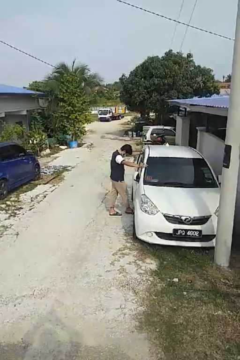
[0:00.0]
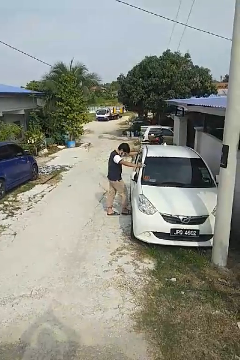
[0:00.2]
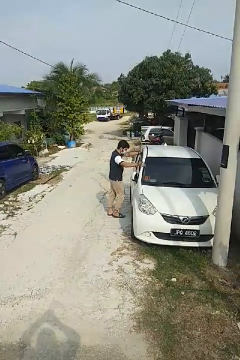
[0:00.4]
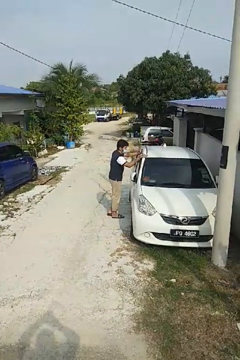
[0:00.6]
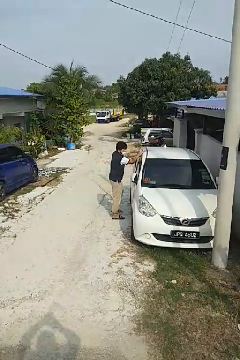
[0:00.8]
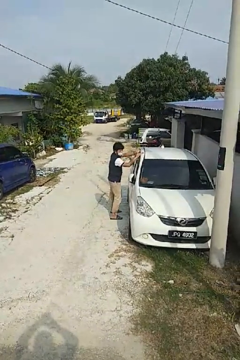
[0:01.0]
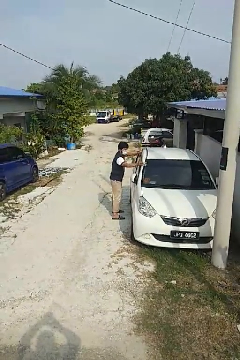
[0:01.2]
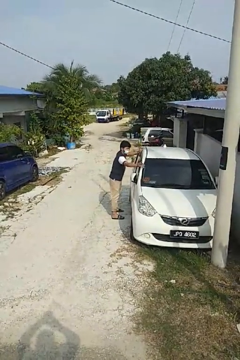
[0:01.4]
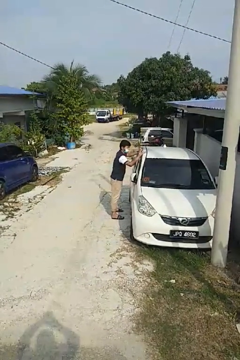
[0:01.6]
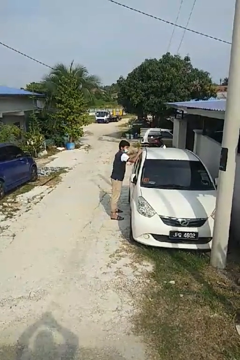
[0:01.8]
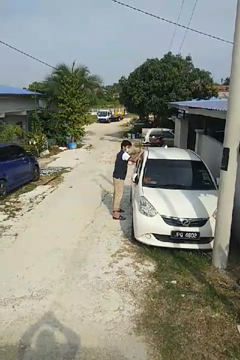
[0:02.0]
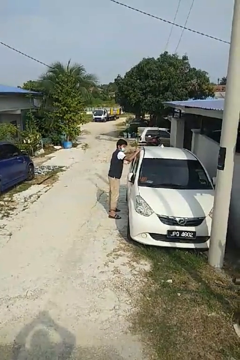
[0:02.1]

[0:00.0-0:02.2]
person polishes car with rag

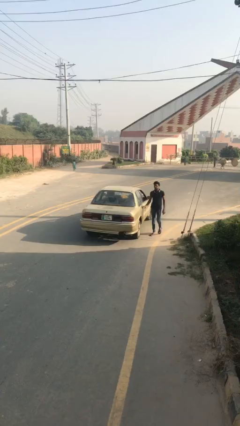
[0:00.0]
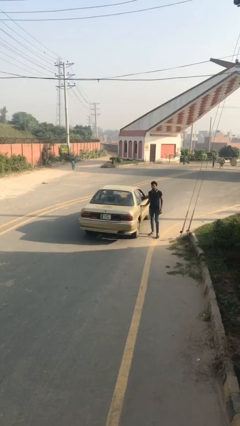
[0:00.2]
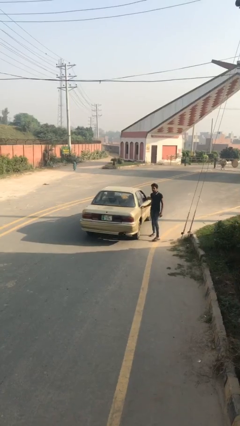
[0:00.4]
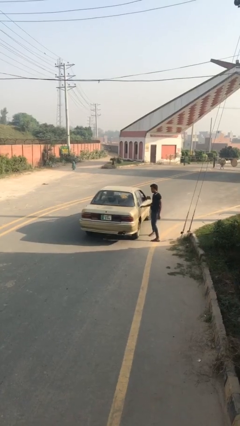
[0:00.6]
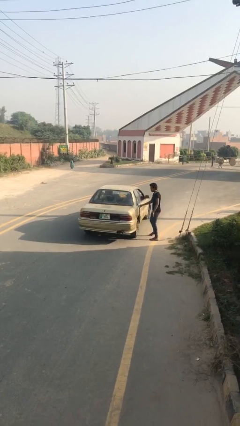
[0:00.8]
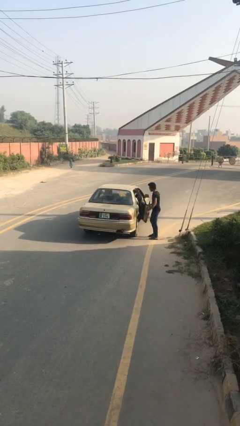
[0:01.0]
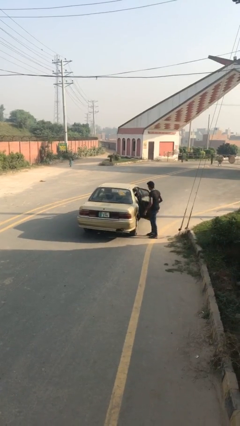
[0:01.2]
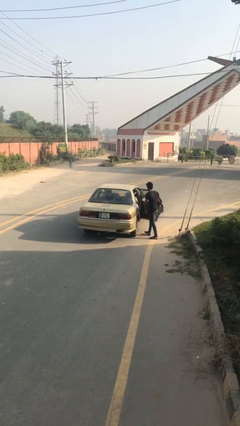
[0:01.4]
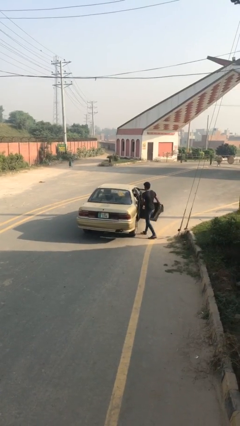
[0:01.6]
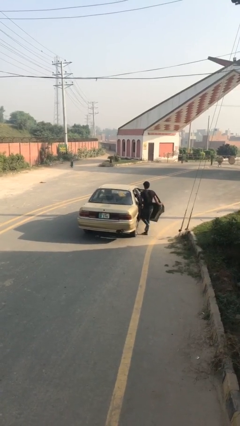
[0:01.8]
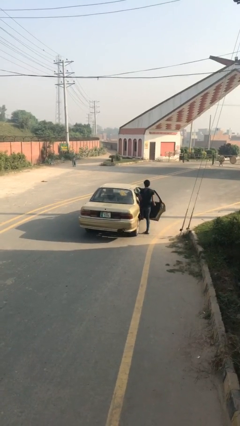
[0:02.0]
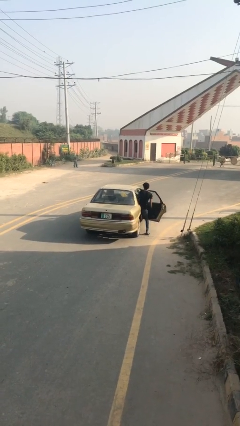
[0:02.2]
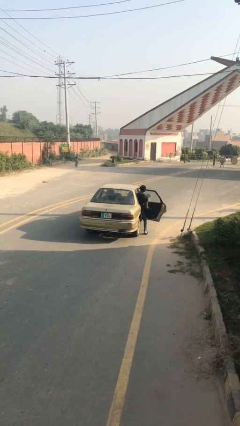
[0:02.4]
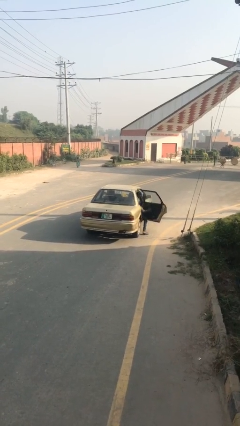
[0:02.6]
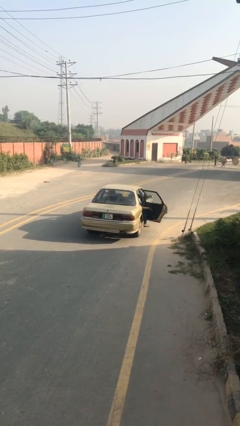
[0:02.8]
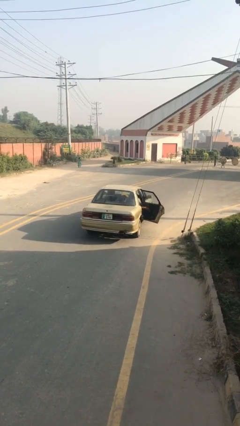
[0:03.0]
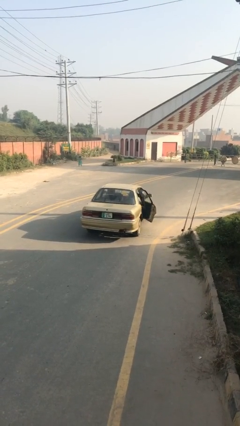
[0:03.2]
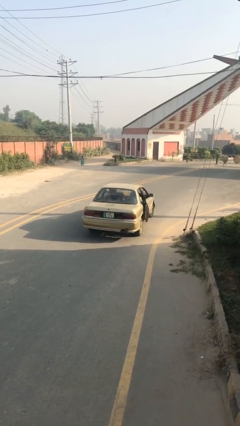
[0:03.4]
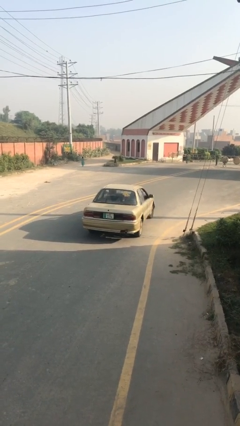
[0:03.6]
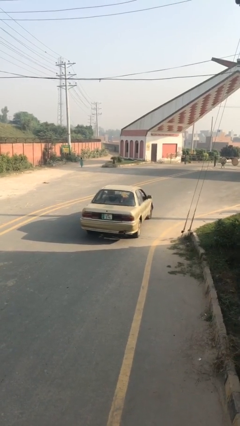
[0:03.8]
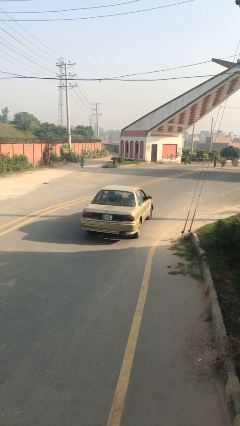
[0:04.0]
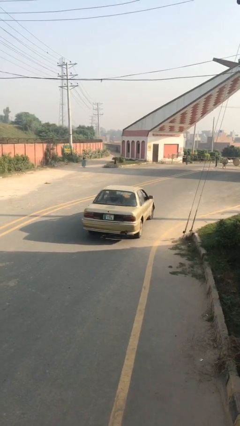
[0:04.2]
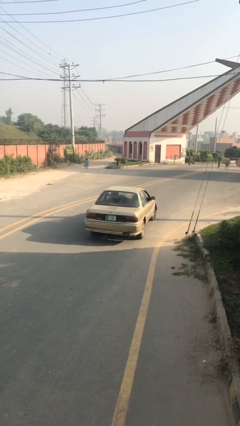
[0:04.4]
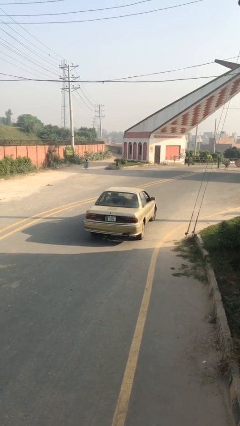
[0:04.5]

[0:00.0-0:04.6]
car picks up person

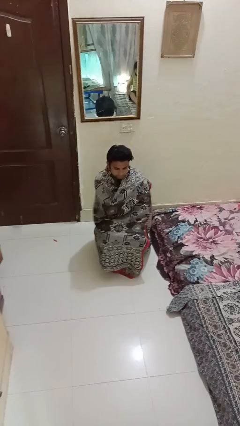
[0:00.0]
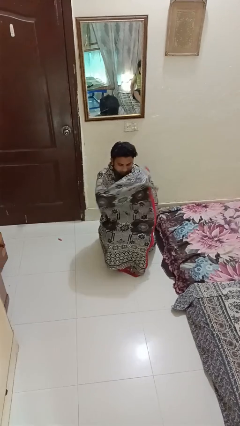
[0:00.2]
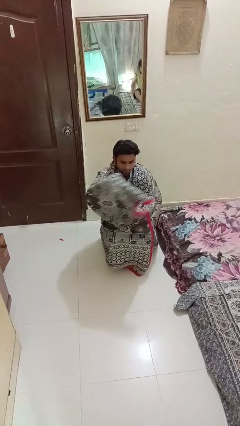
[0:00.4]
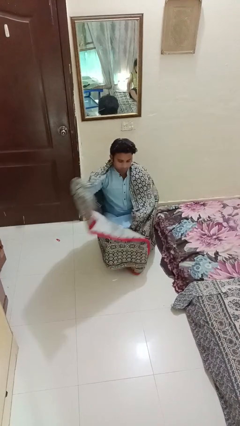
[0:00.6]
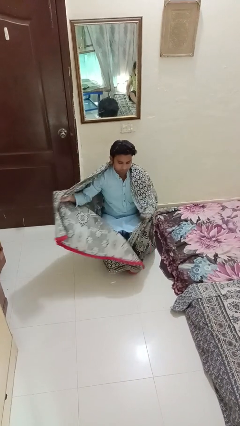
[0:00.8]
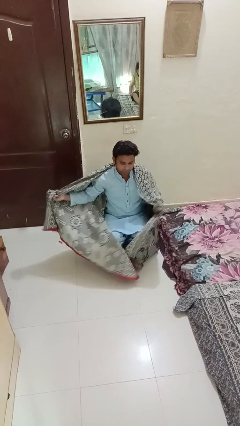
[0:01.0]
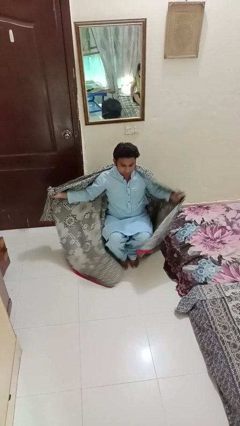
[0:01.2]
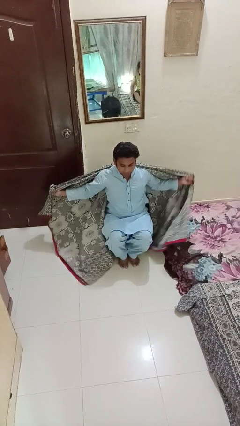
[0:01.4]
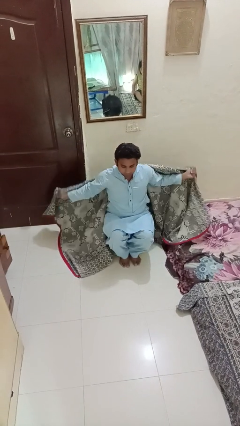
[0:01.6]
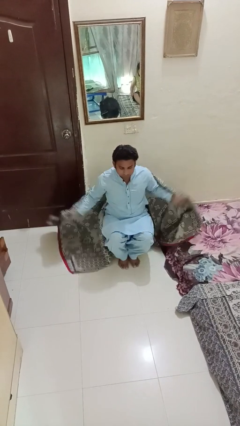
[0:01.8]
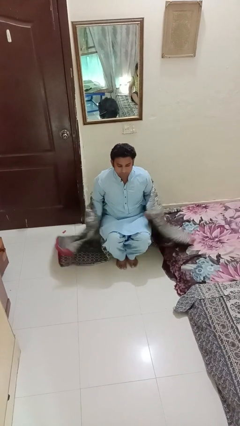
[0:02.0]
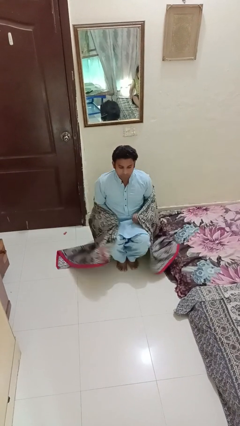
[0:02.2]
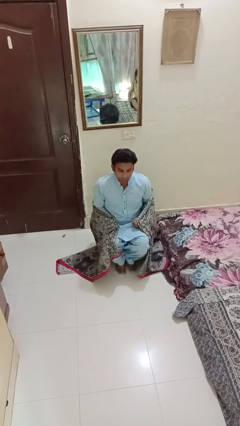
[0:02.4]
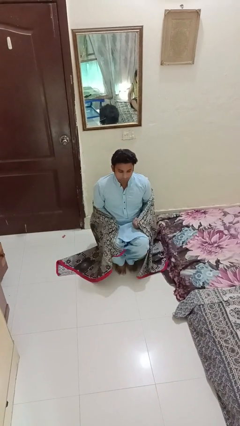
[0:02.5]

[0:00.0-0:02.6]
person uncovers with blanket

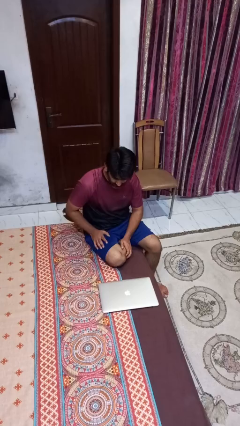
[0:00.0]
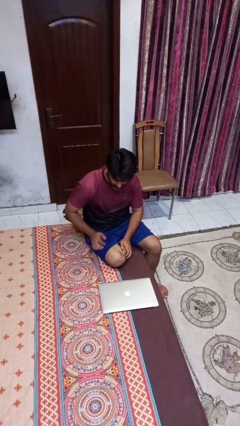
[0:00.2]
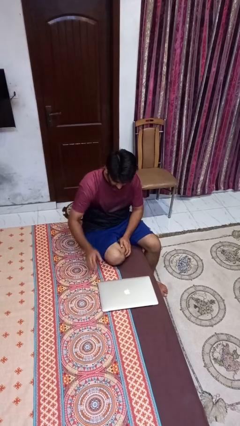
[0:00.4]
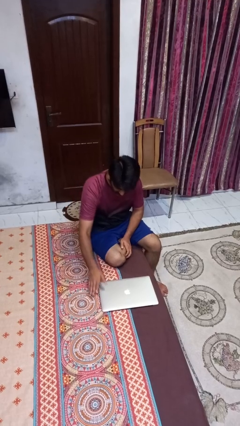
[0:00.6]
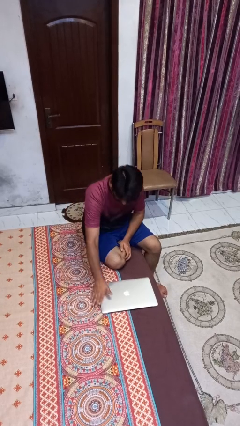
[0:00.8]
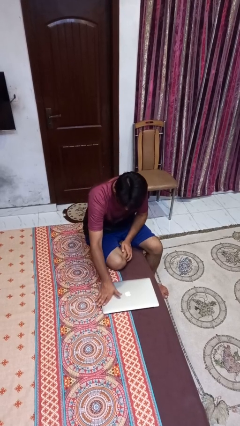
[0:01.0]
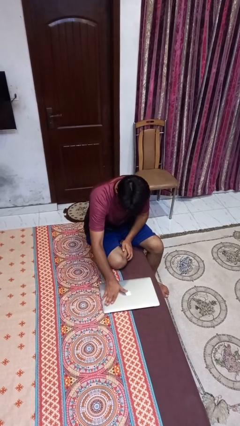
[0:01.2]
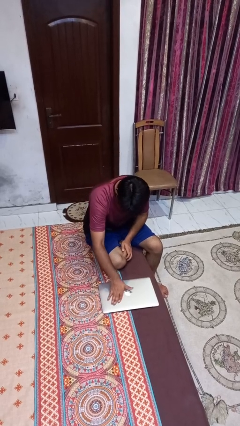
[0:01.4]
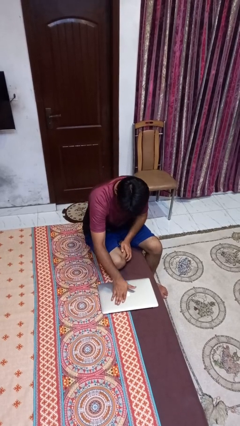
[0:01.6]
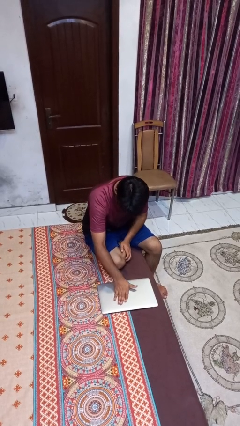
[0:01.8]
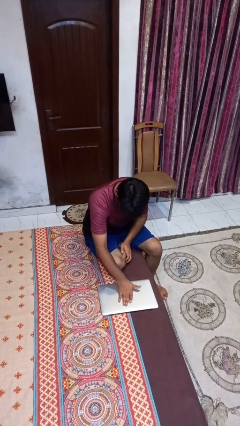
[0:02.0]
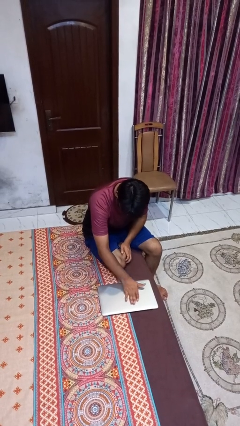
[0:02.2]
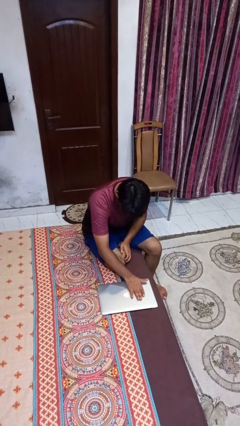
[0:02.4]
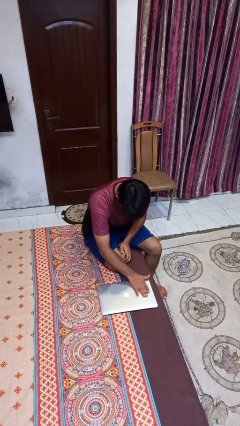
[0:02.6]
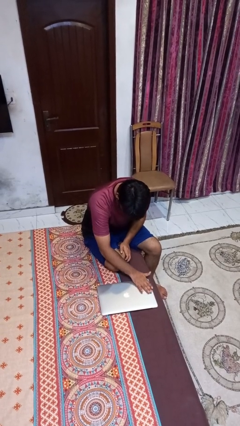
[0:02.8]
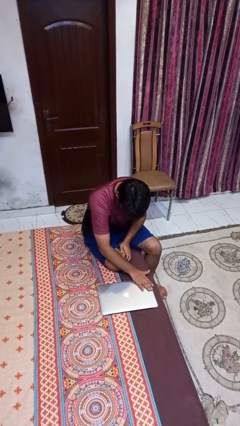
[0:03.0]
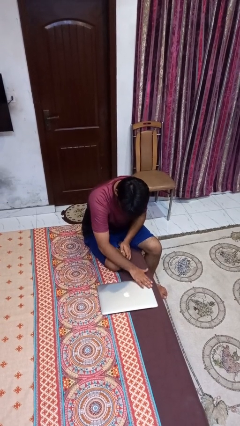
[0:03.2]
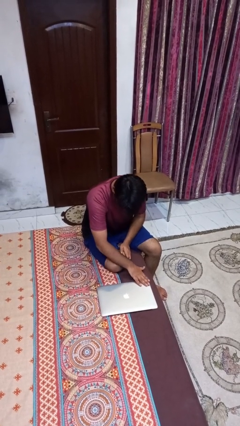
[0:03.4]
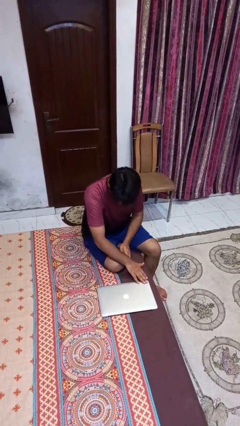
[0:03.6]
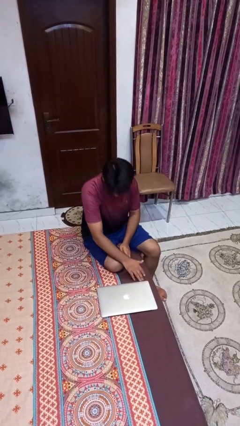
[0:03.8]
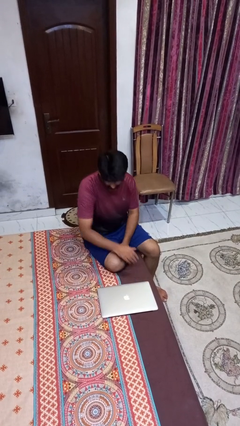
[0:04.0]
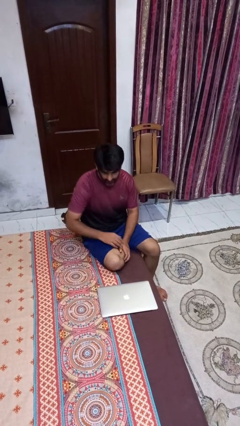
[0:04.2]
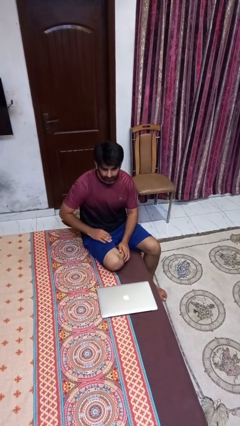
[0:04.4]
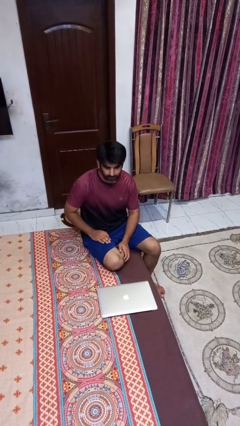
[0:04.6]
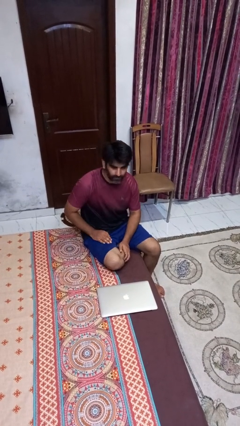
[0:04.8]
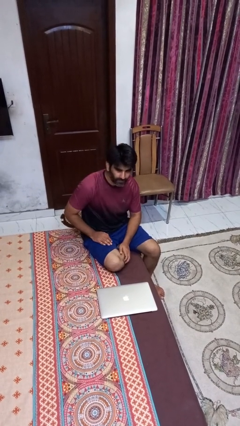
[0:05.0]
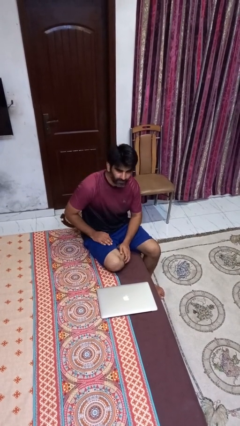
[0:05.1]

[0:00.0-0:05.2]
person waves hand over object

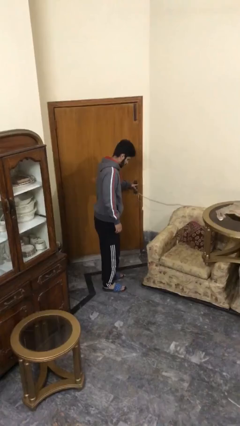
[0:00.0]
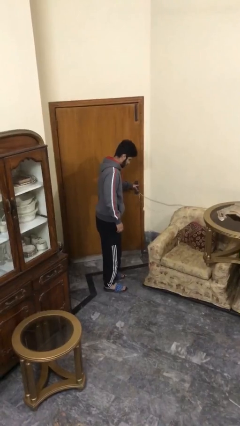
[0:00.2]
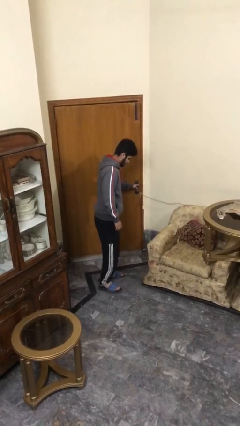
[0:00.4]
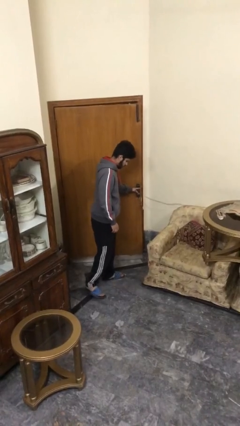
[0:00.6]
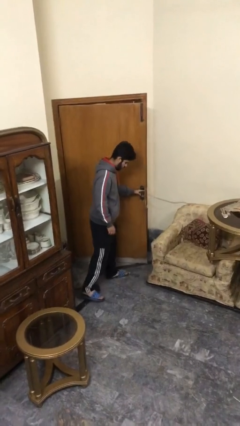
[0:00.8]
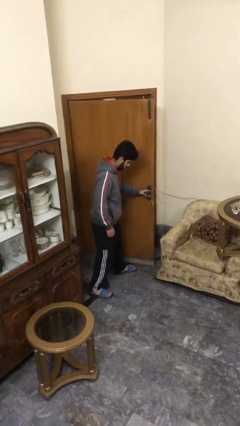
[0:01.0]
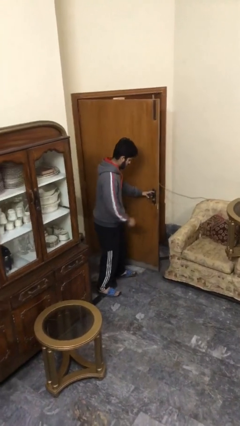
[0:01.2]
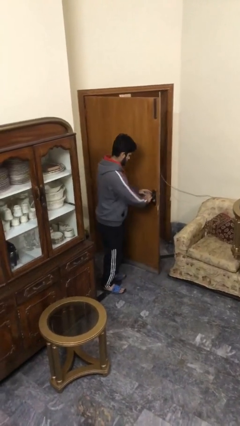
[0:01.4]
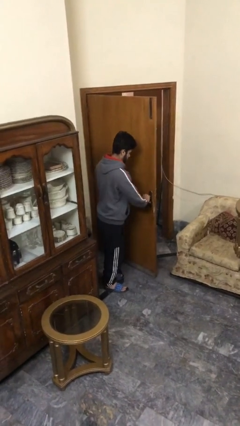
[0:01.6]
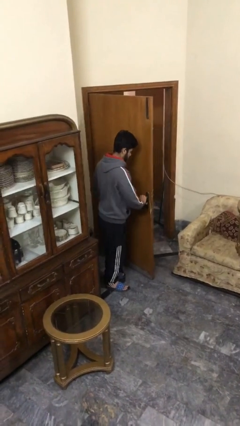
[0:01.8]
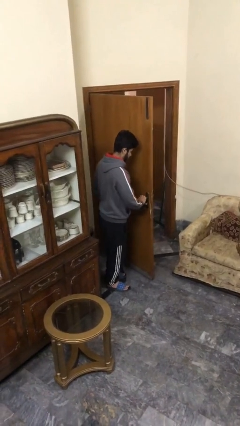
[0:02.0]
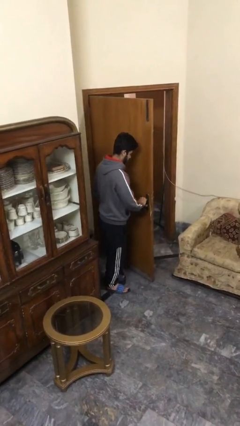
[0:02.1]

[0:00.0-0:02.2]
person opens facility door

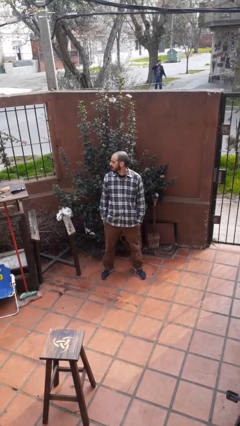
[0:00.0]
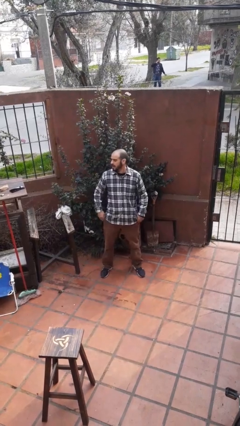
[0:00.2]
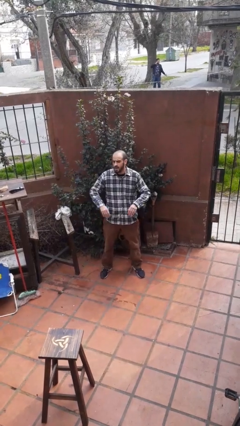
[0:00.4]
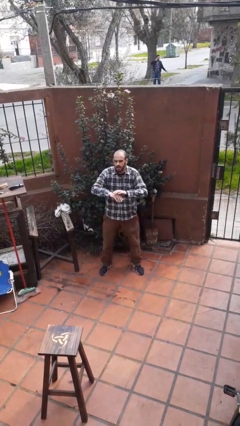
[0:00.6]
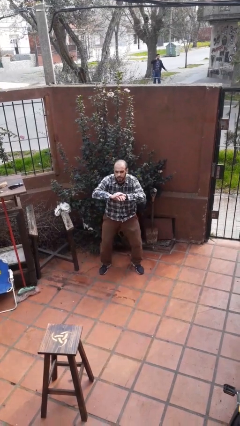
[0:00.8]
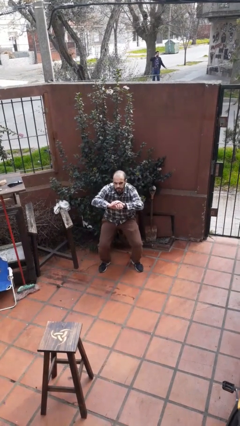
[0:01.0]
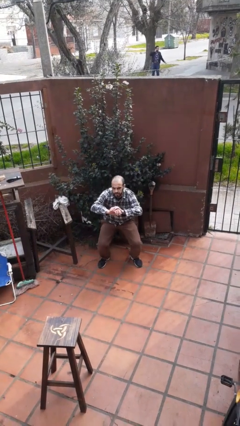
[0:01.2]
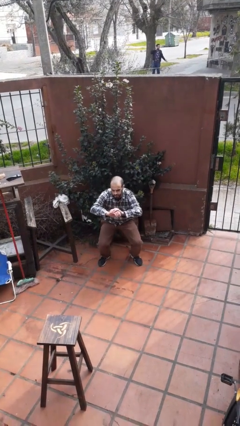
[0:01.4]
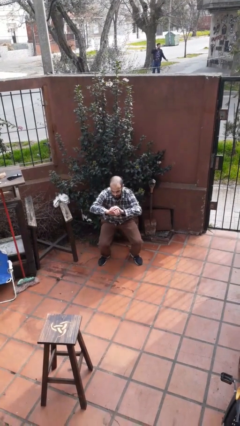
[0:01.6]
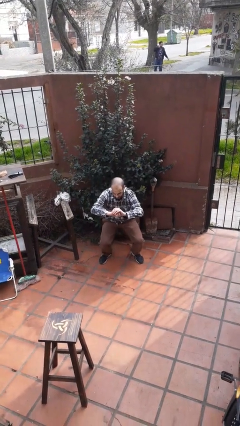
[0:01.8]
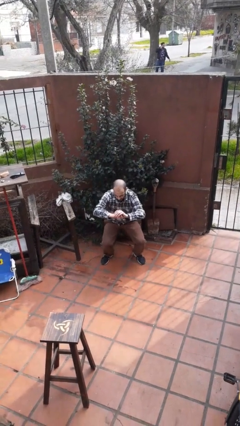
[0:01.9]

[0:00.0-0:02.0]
person squats
